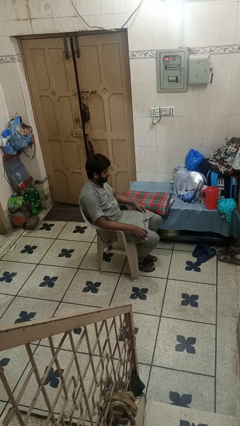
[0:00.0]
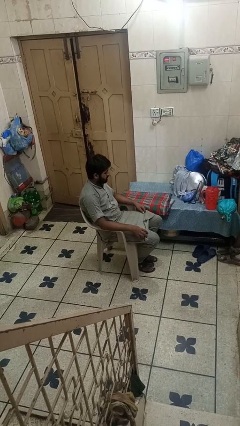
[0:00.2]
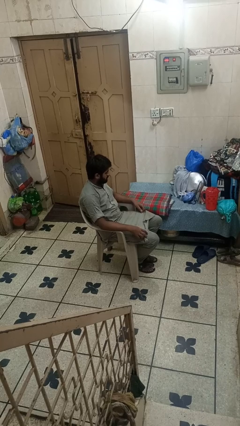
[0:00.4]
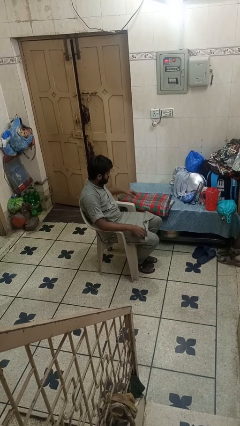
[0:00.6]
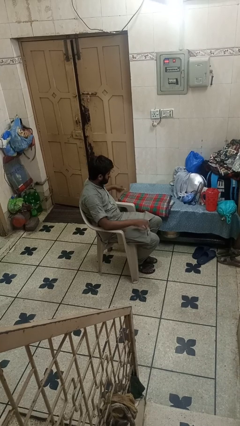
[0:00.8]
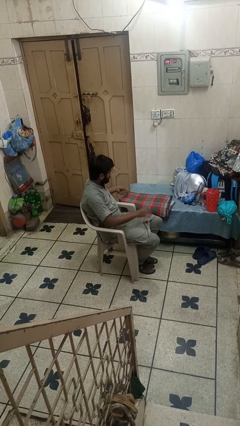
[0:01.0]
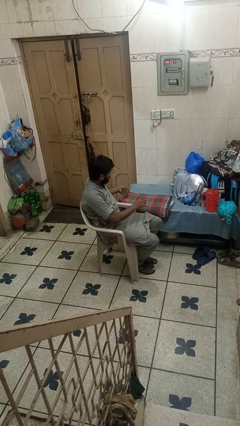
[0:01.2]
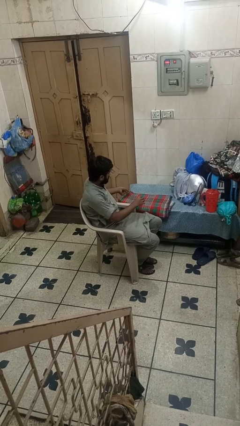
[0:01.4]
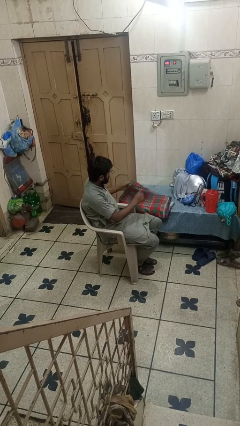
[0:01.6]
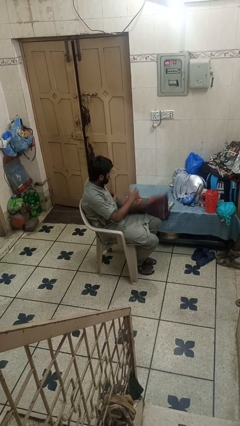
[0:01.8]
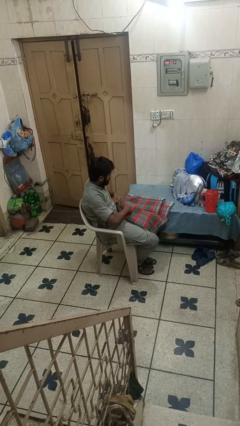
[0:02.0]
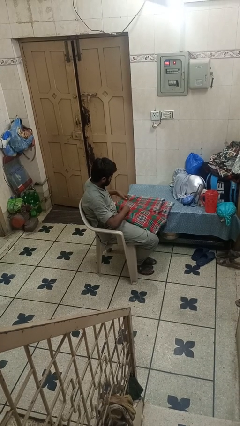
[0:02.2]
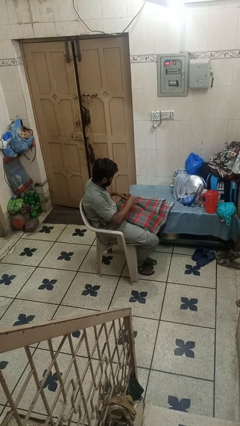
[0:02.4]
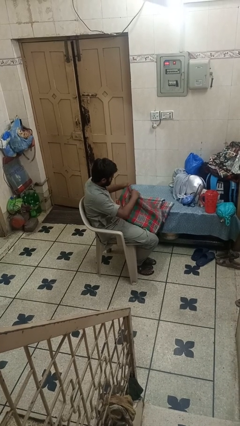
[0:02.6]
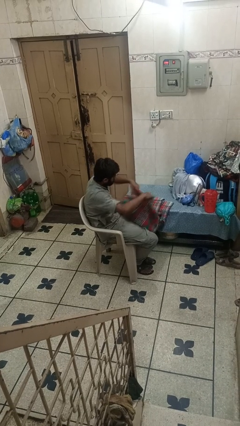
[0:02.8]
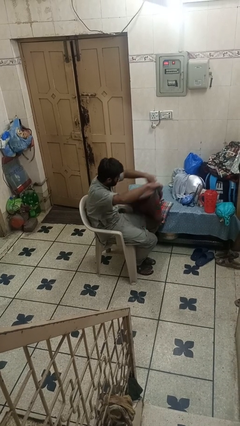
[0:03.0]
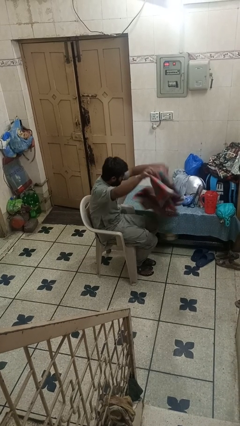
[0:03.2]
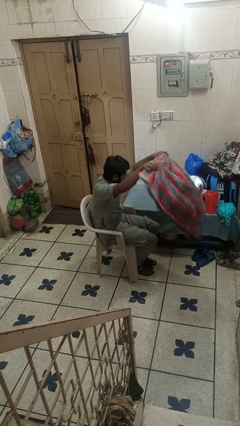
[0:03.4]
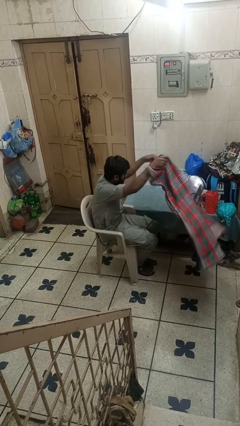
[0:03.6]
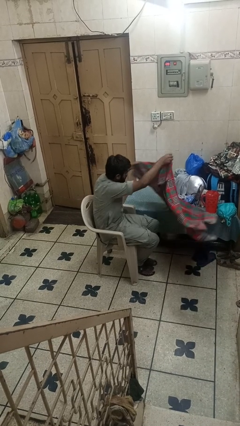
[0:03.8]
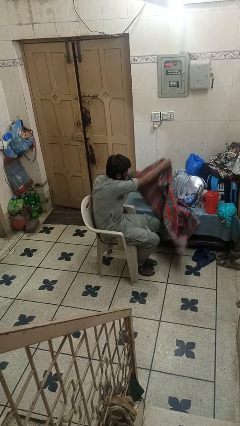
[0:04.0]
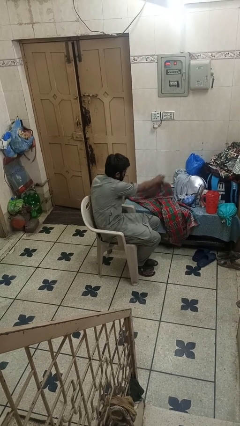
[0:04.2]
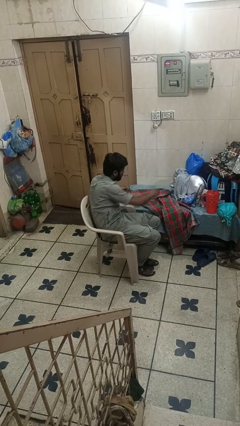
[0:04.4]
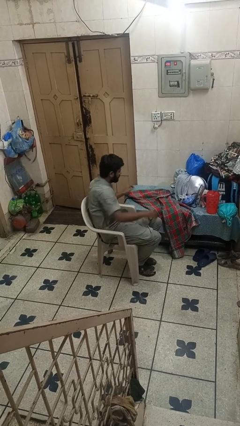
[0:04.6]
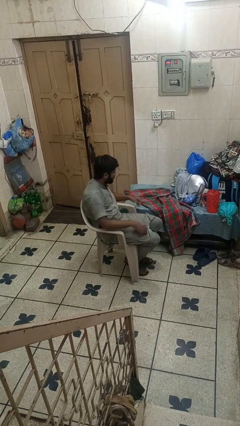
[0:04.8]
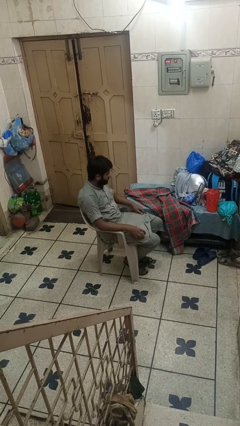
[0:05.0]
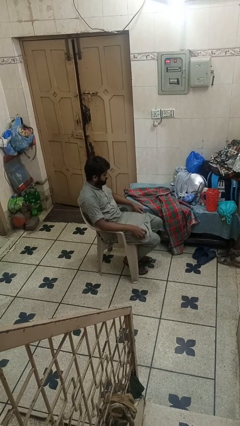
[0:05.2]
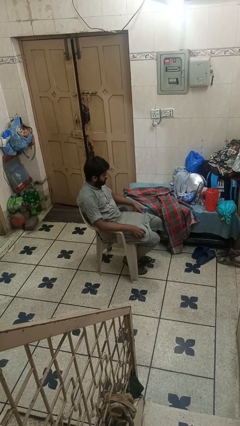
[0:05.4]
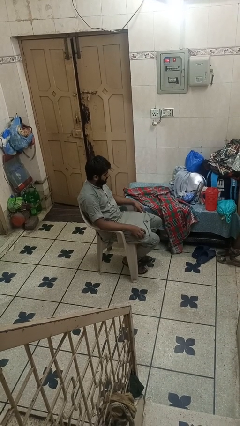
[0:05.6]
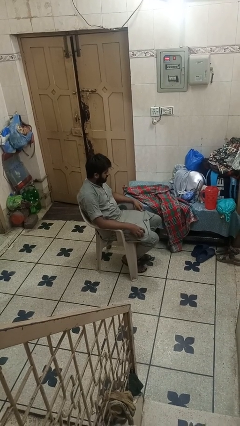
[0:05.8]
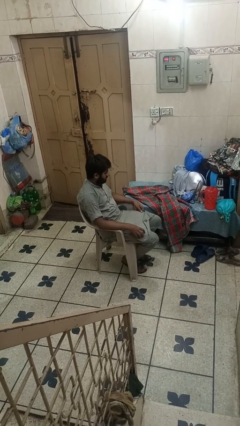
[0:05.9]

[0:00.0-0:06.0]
person unfolds blanket

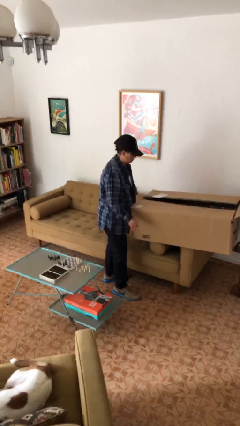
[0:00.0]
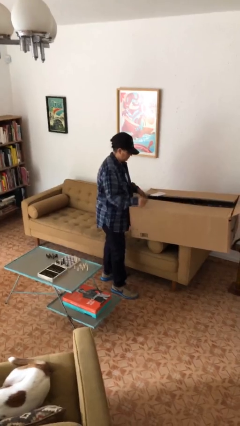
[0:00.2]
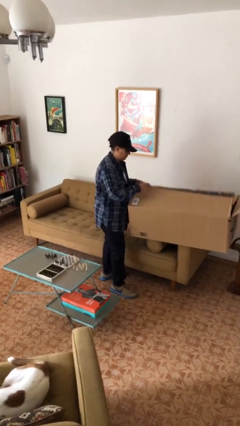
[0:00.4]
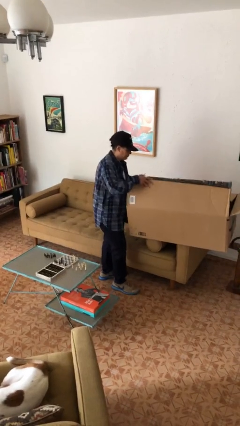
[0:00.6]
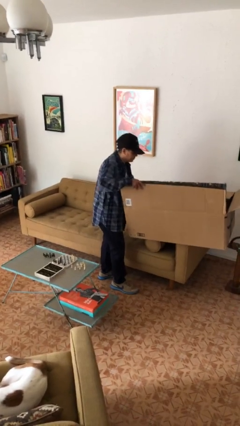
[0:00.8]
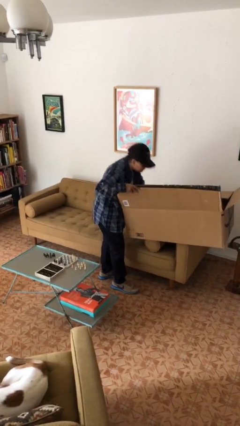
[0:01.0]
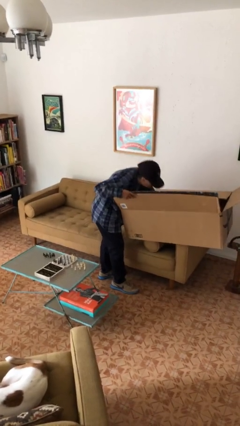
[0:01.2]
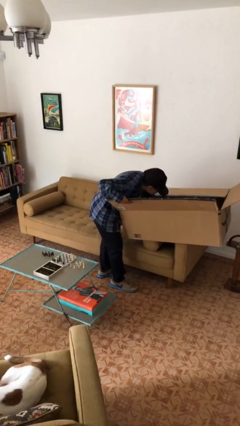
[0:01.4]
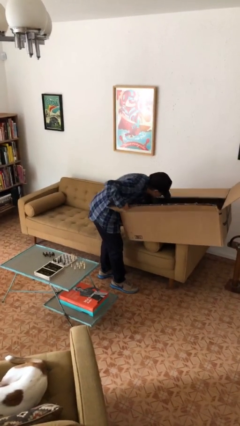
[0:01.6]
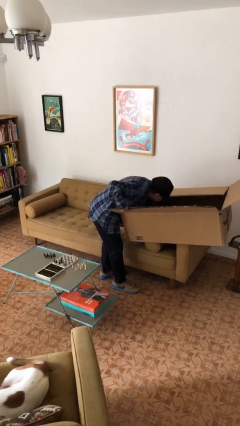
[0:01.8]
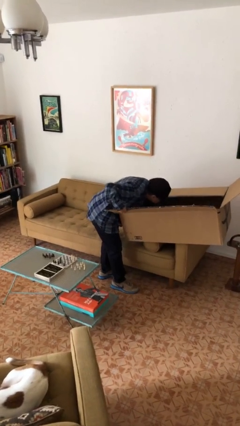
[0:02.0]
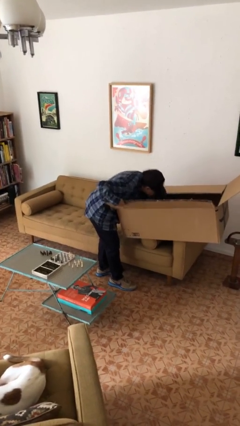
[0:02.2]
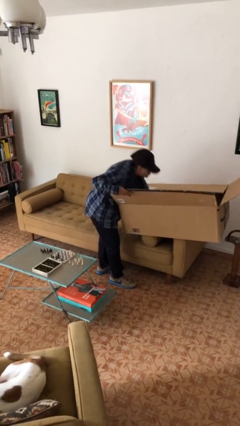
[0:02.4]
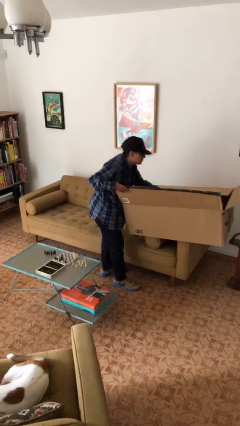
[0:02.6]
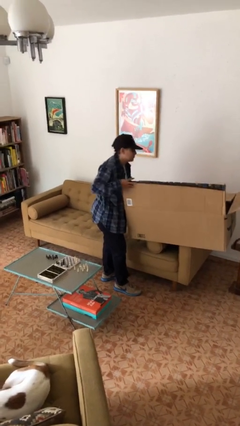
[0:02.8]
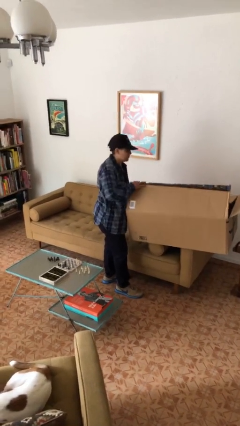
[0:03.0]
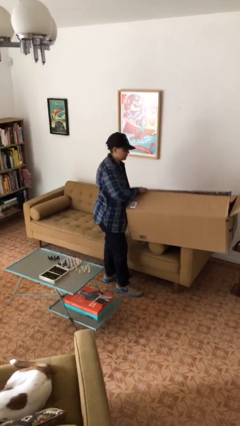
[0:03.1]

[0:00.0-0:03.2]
person searches in box

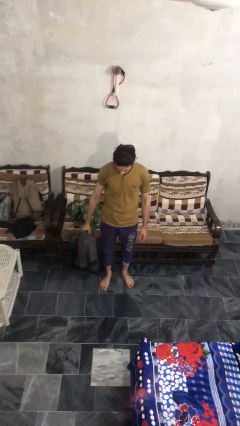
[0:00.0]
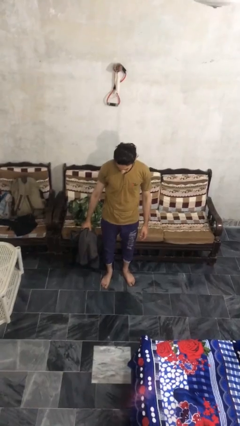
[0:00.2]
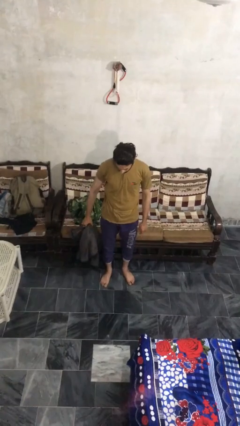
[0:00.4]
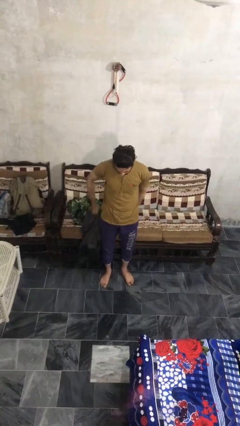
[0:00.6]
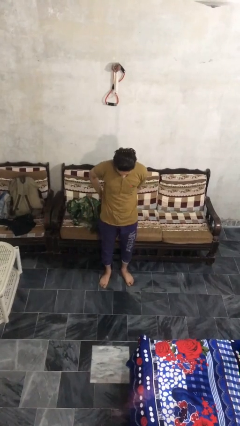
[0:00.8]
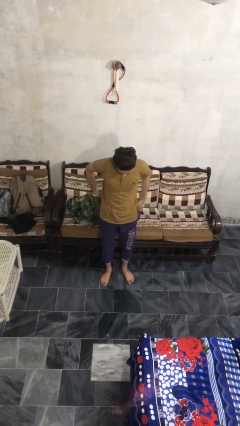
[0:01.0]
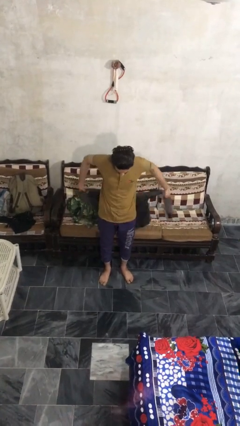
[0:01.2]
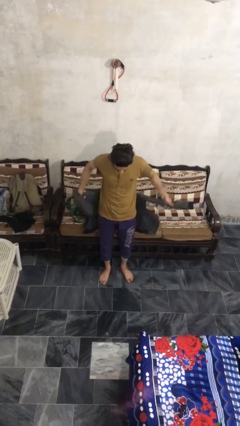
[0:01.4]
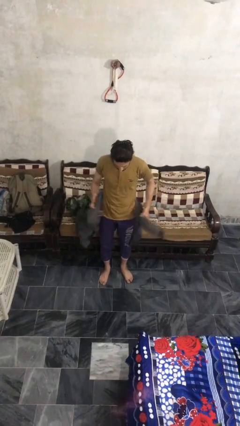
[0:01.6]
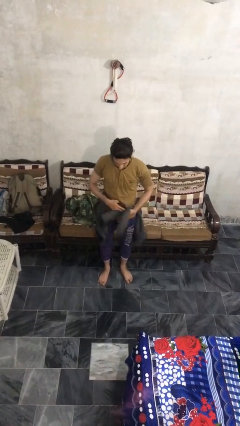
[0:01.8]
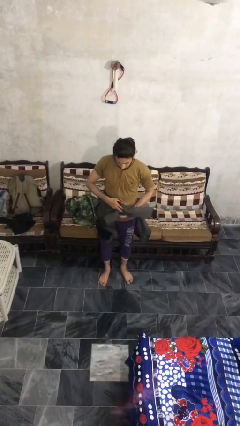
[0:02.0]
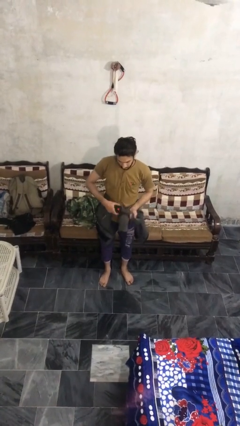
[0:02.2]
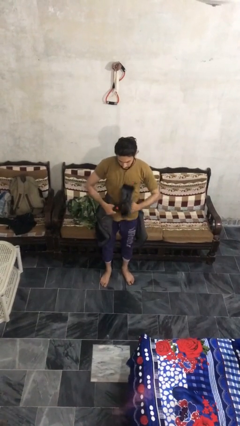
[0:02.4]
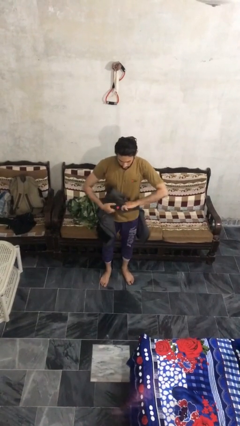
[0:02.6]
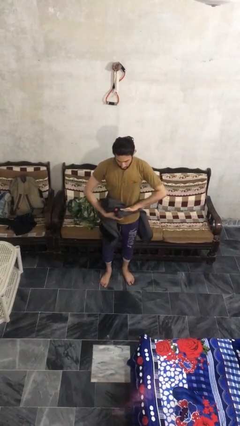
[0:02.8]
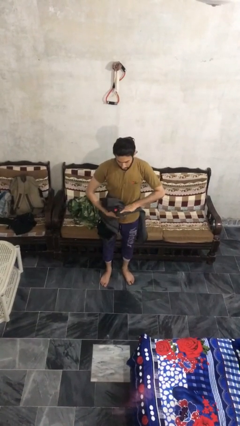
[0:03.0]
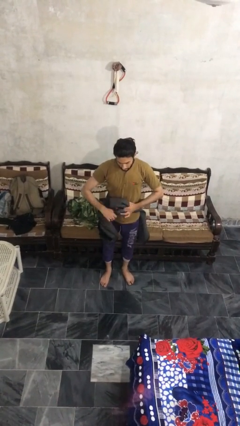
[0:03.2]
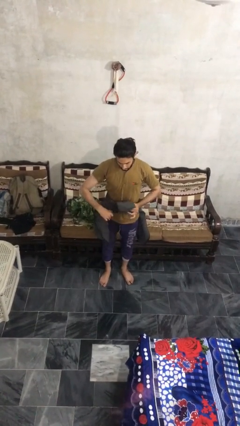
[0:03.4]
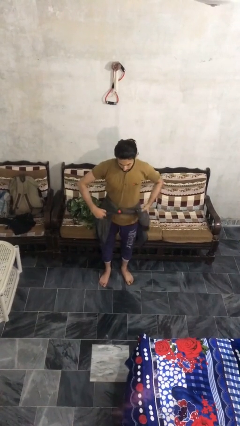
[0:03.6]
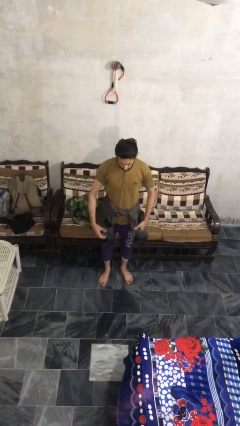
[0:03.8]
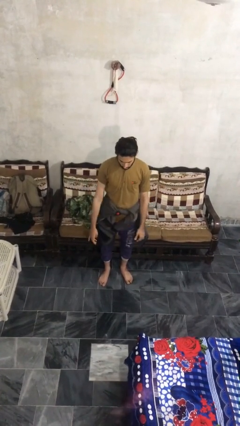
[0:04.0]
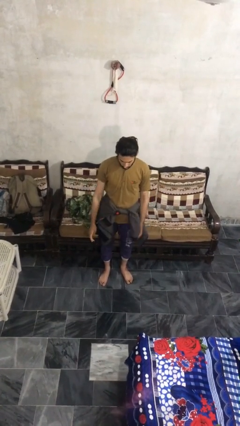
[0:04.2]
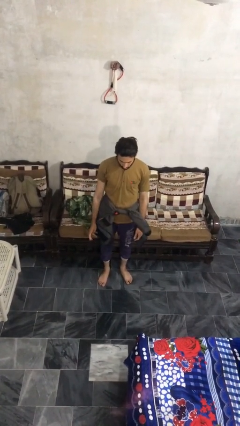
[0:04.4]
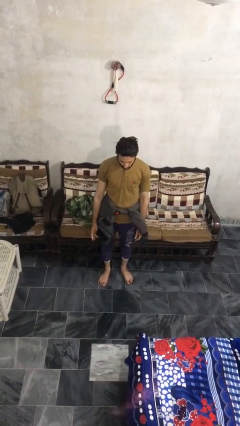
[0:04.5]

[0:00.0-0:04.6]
person ties jacket around waist

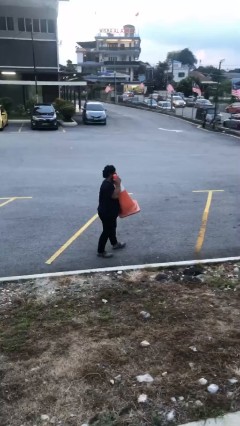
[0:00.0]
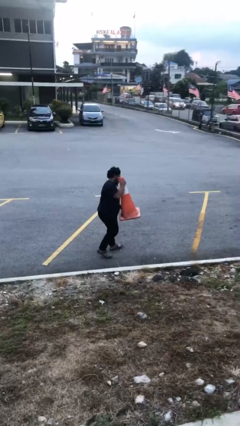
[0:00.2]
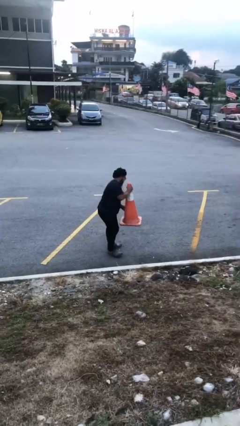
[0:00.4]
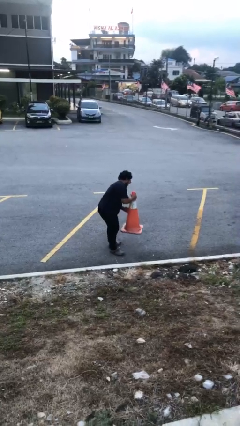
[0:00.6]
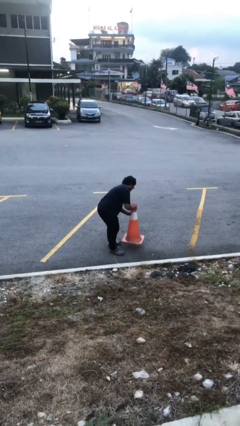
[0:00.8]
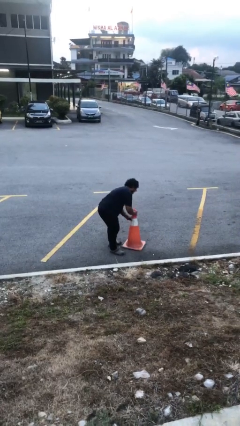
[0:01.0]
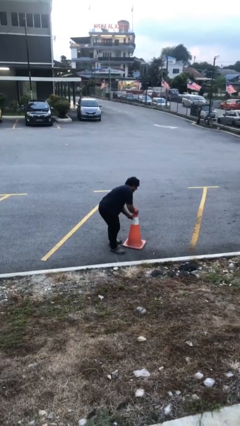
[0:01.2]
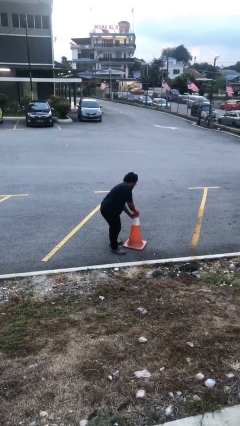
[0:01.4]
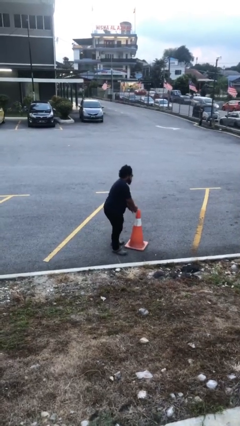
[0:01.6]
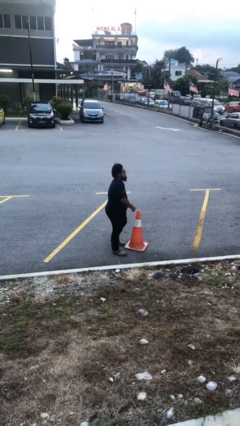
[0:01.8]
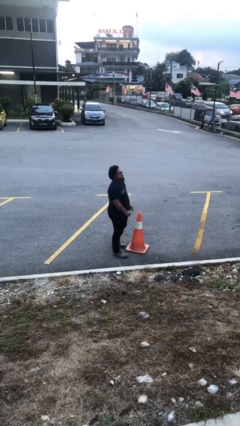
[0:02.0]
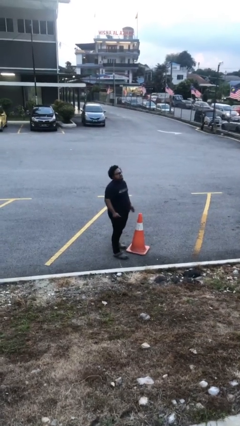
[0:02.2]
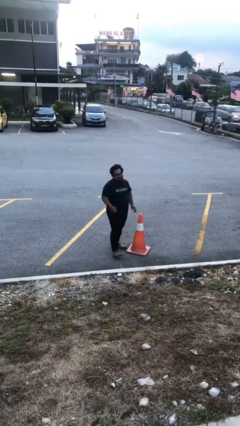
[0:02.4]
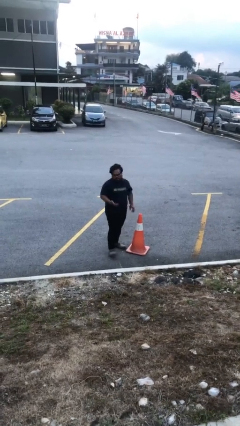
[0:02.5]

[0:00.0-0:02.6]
person puts down object on floor

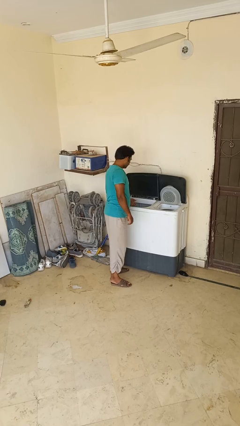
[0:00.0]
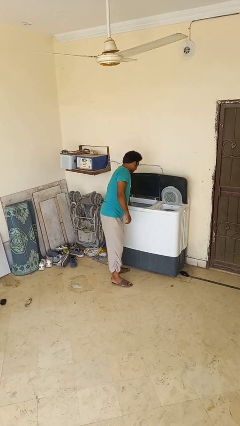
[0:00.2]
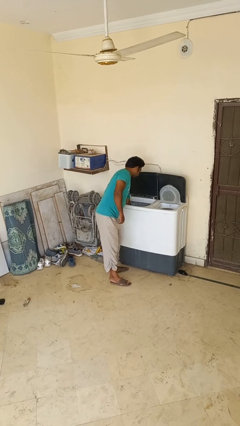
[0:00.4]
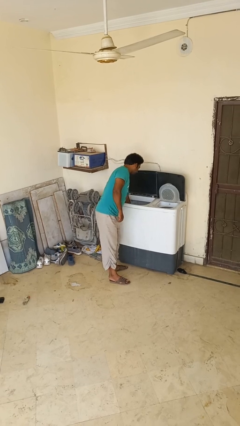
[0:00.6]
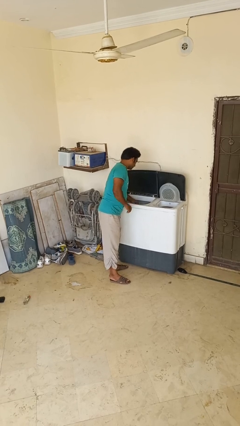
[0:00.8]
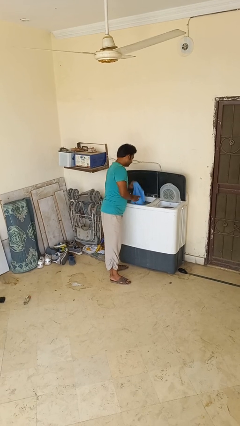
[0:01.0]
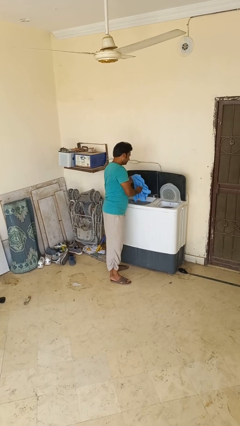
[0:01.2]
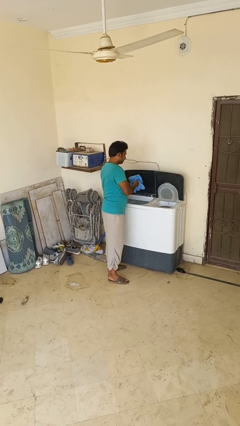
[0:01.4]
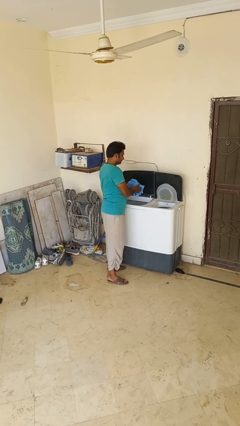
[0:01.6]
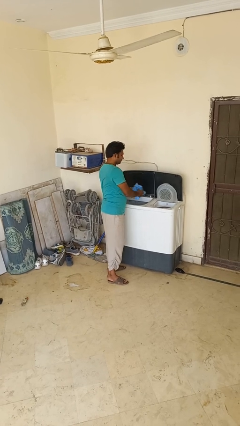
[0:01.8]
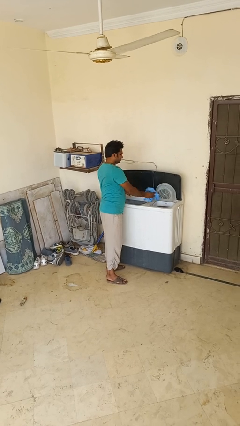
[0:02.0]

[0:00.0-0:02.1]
person unloads clotheswasher
